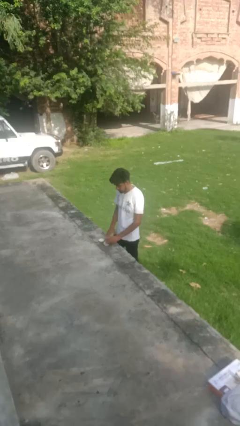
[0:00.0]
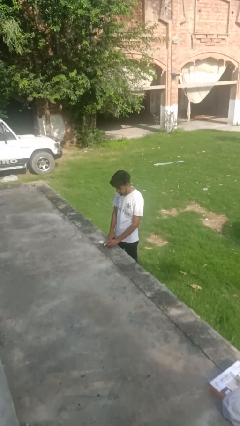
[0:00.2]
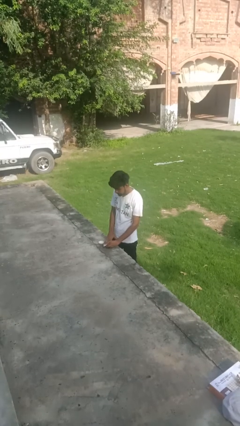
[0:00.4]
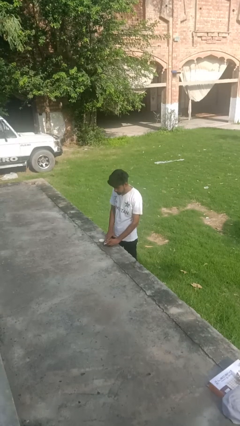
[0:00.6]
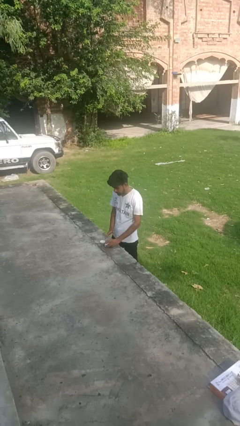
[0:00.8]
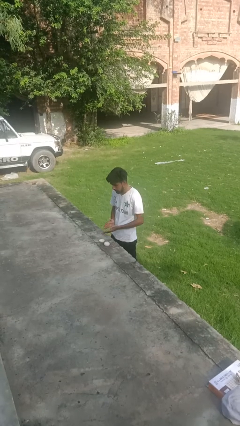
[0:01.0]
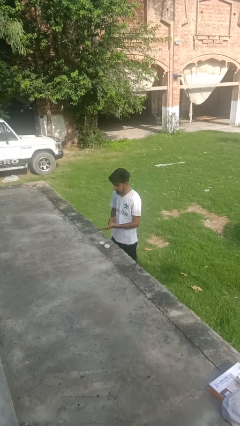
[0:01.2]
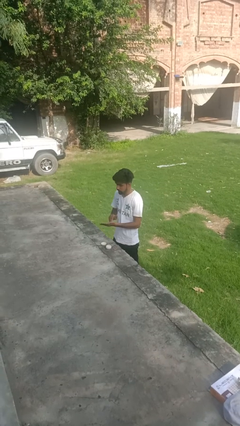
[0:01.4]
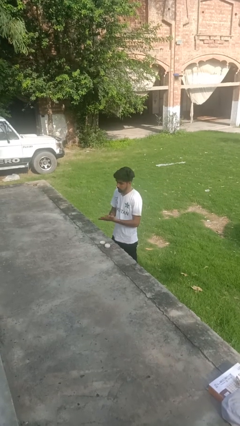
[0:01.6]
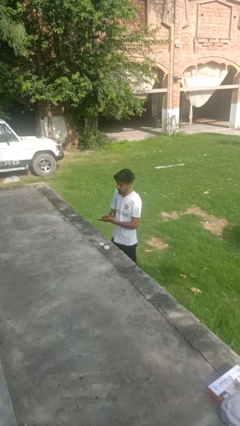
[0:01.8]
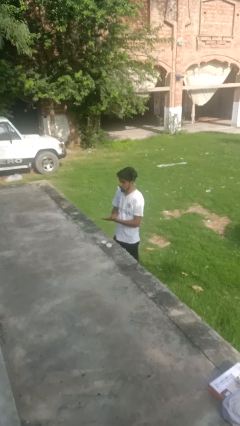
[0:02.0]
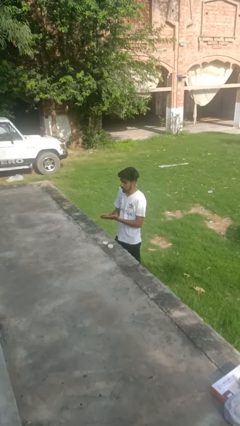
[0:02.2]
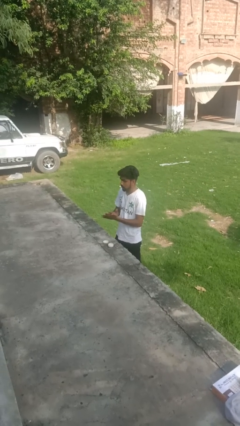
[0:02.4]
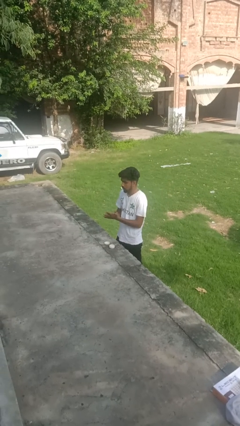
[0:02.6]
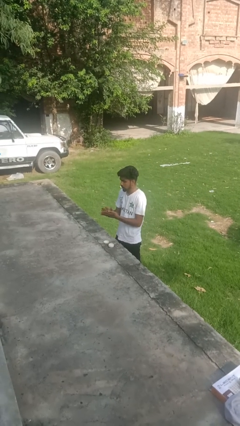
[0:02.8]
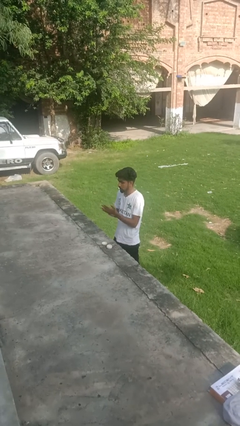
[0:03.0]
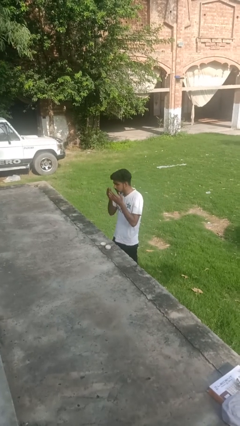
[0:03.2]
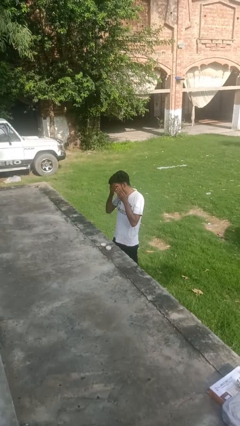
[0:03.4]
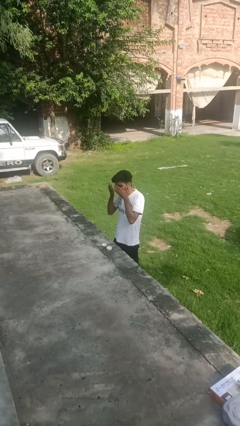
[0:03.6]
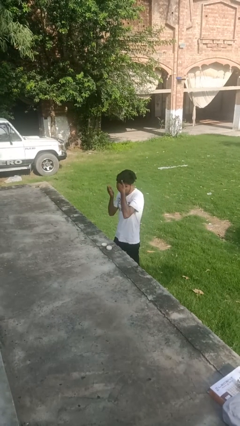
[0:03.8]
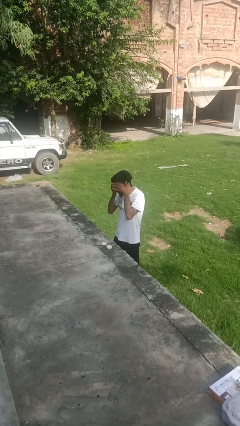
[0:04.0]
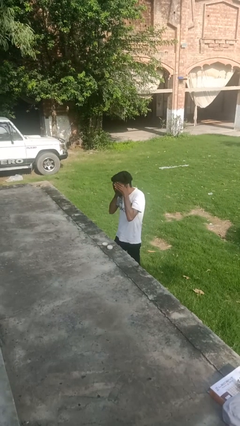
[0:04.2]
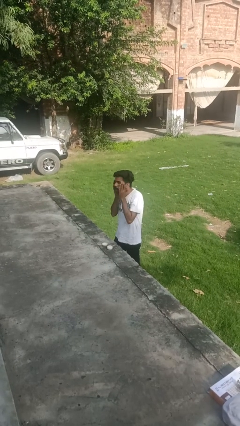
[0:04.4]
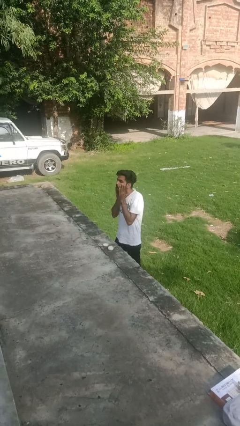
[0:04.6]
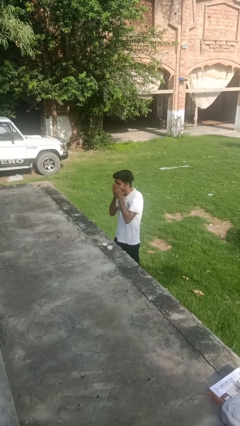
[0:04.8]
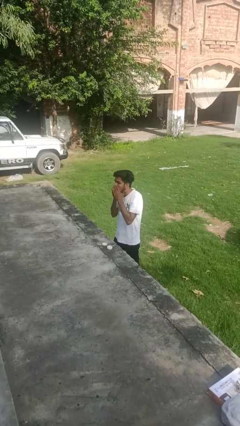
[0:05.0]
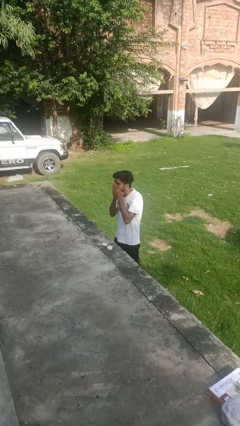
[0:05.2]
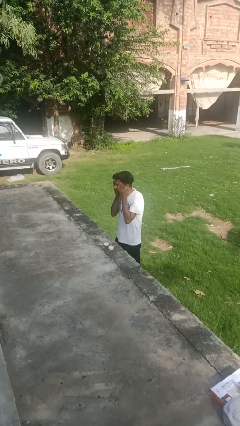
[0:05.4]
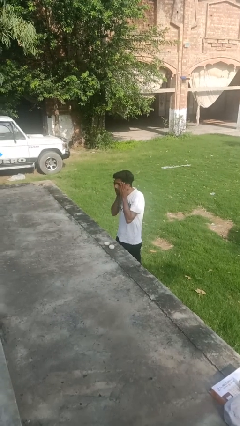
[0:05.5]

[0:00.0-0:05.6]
person applies facial moisturizer

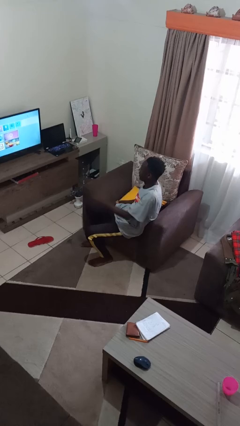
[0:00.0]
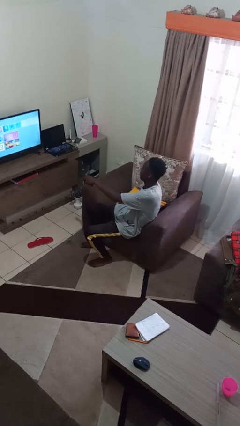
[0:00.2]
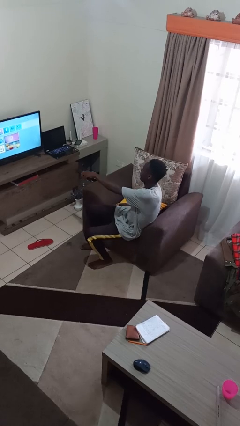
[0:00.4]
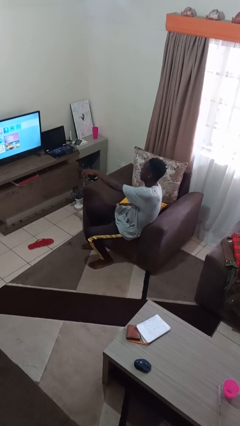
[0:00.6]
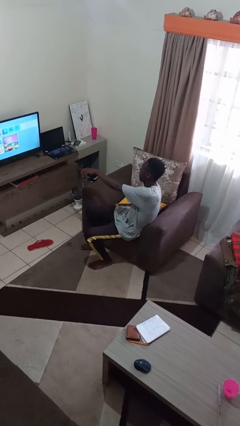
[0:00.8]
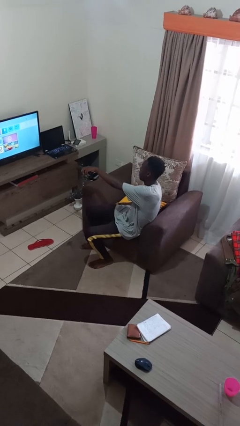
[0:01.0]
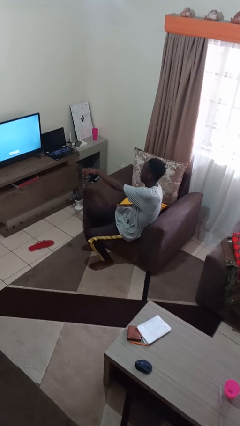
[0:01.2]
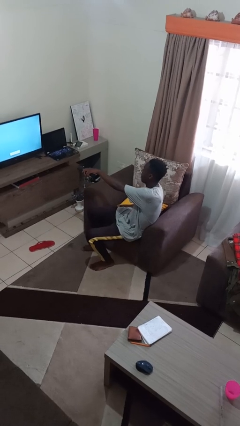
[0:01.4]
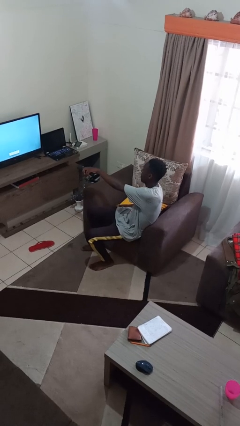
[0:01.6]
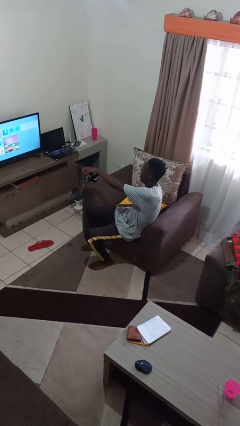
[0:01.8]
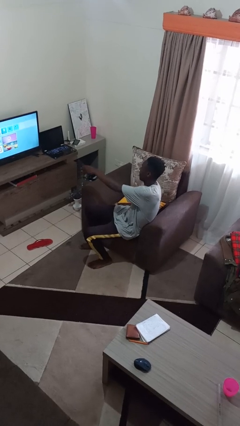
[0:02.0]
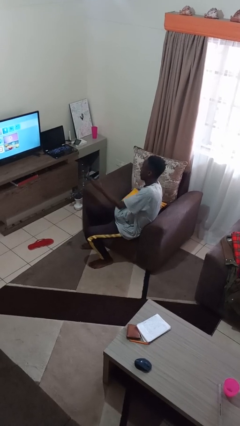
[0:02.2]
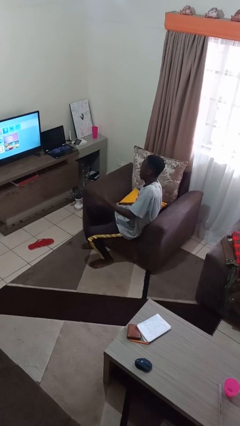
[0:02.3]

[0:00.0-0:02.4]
person uses television remote

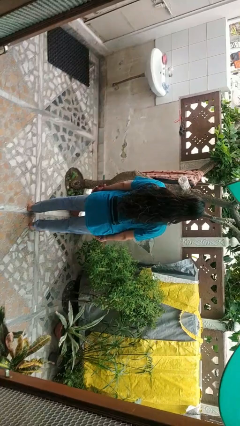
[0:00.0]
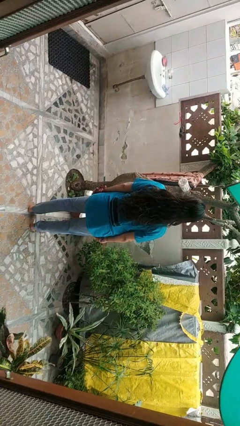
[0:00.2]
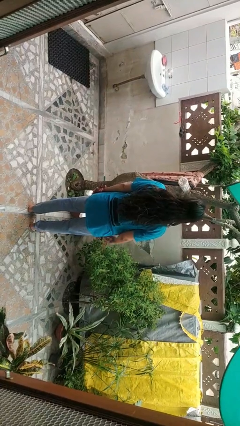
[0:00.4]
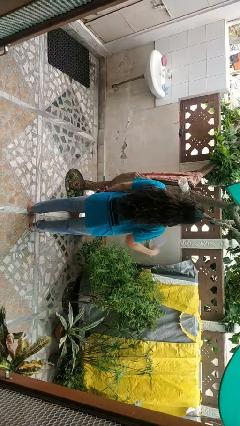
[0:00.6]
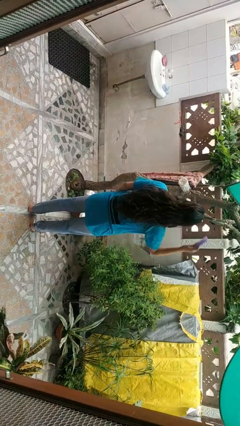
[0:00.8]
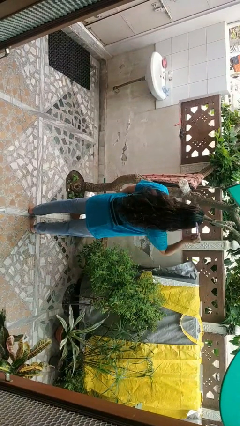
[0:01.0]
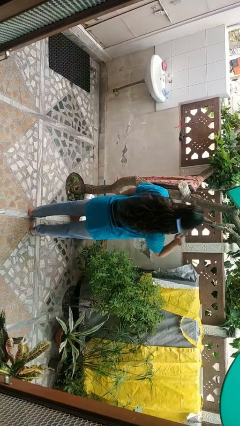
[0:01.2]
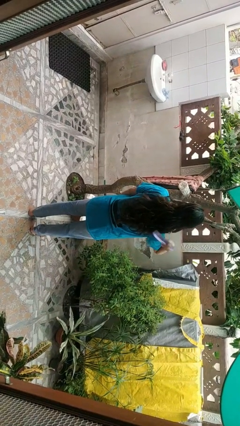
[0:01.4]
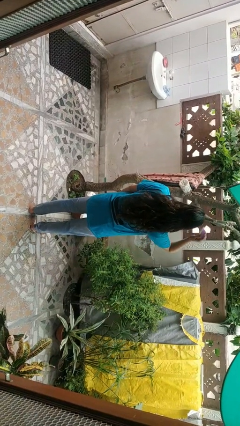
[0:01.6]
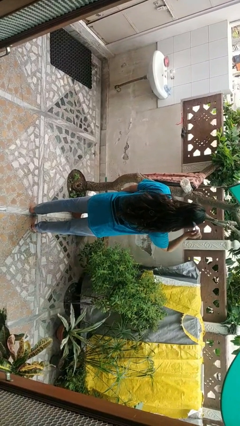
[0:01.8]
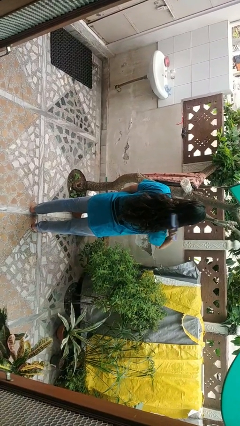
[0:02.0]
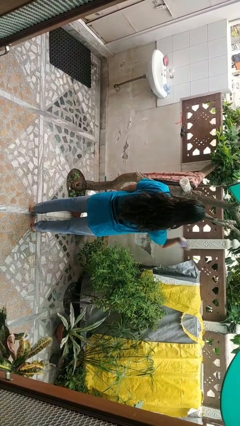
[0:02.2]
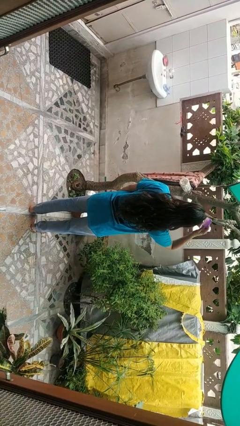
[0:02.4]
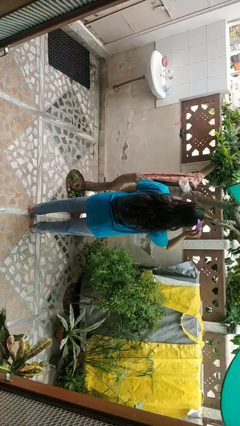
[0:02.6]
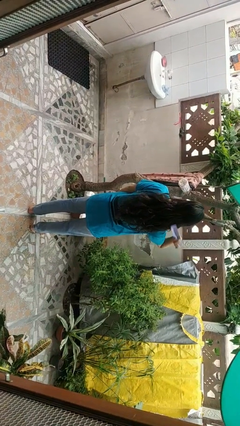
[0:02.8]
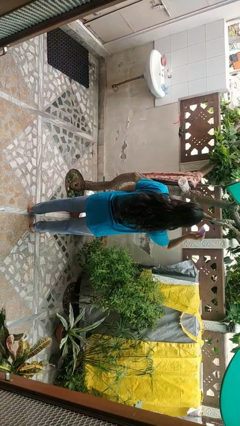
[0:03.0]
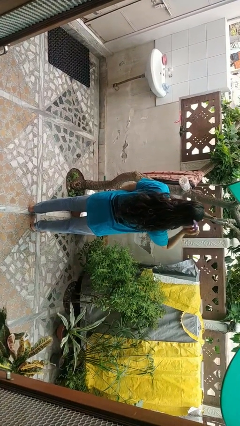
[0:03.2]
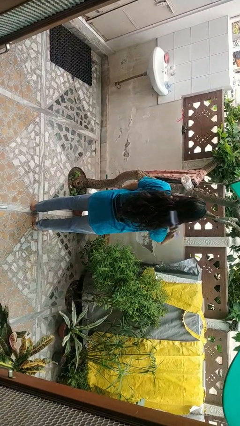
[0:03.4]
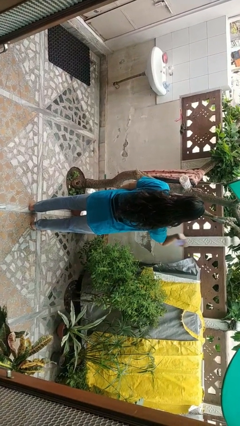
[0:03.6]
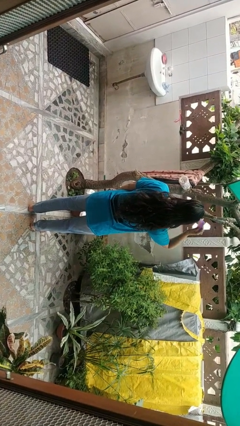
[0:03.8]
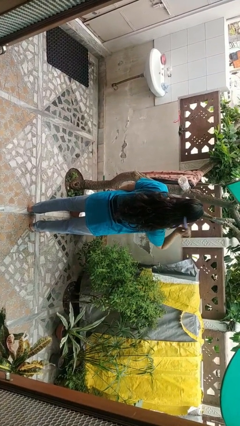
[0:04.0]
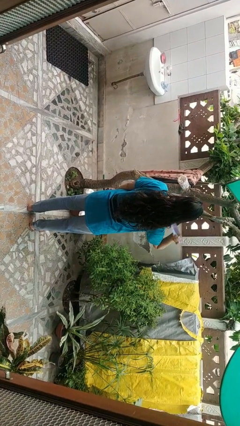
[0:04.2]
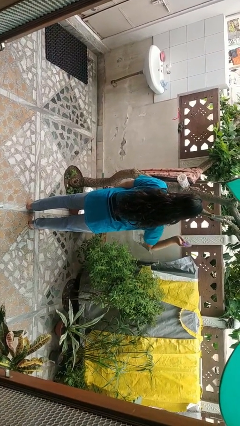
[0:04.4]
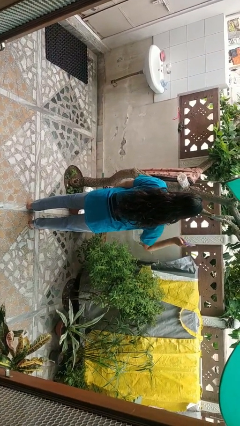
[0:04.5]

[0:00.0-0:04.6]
person brushes hair

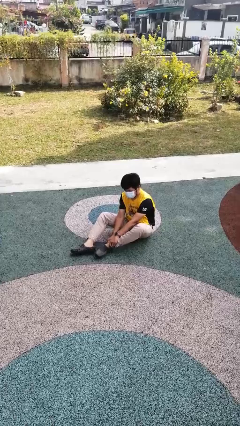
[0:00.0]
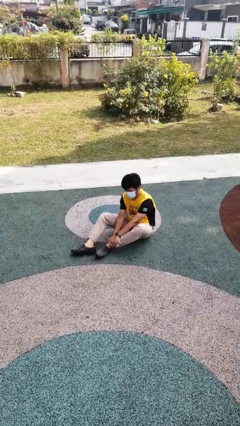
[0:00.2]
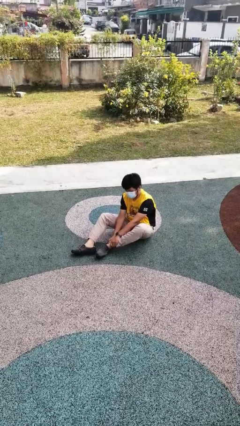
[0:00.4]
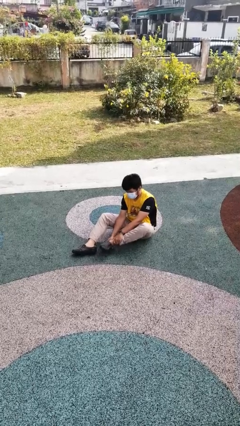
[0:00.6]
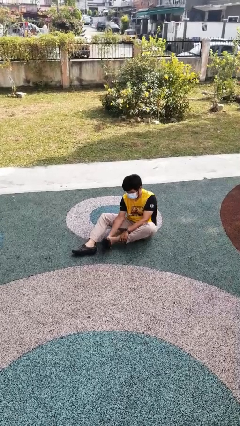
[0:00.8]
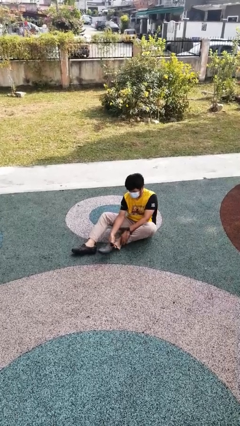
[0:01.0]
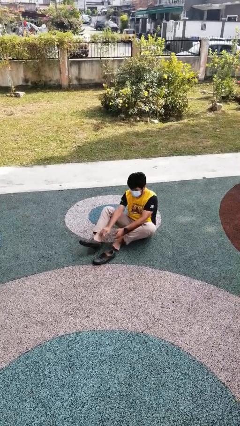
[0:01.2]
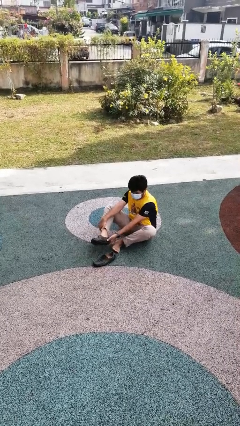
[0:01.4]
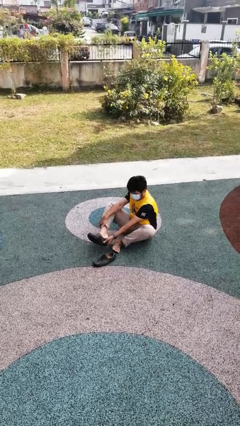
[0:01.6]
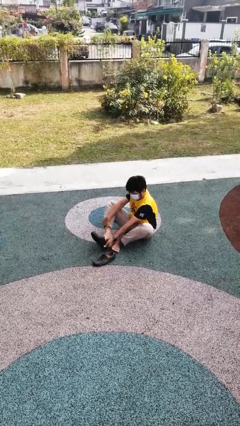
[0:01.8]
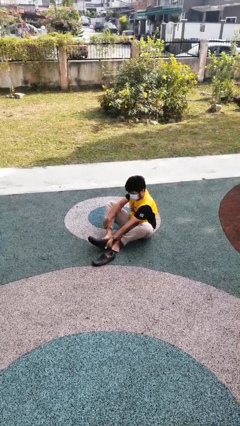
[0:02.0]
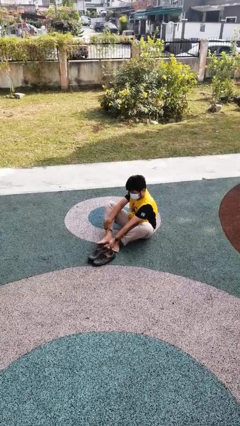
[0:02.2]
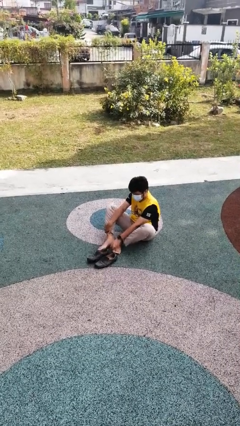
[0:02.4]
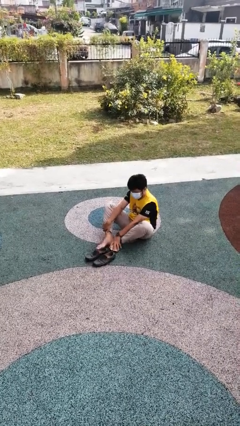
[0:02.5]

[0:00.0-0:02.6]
person takes off shoes

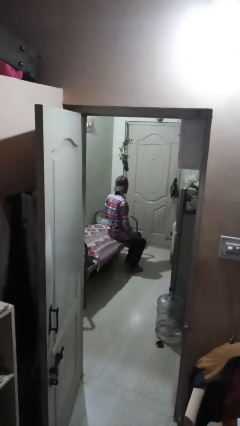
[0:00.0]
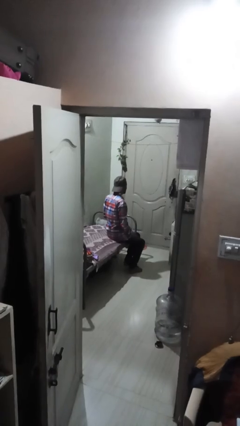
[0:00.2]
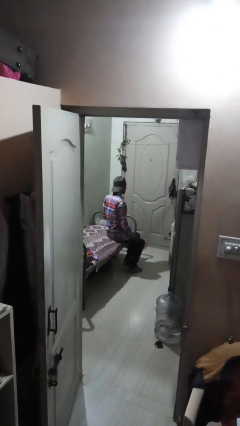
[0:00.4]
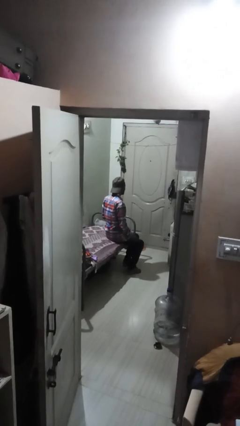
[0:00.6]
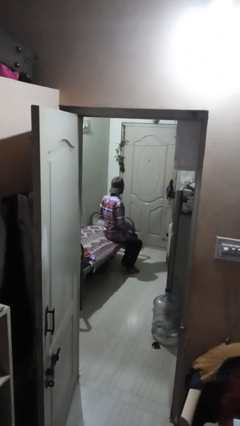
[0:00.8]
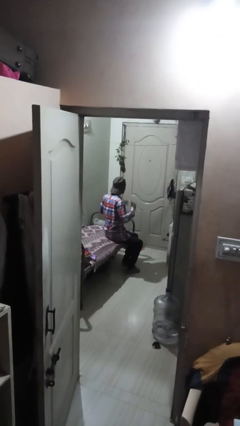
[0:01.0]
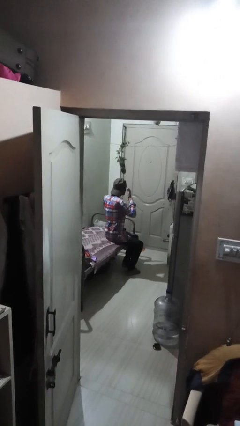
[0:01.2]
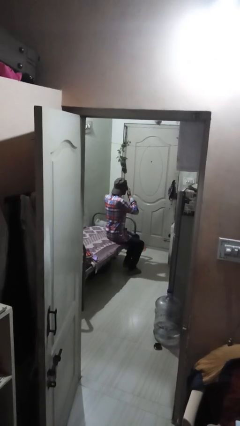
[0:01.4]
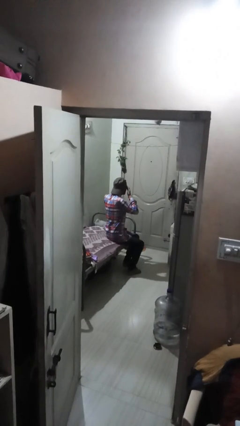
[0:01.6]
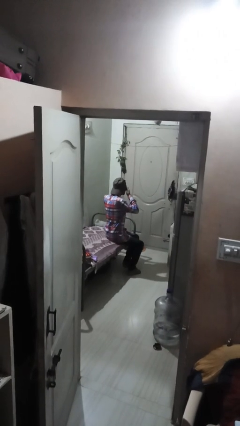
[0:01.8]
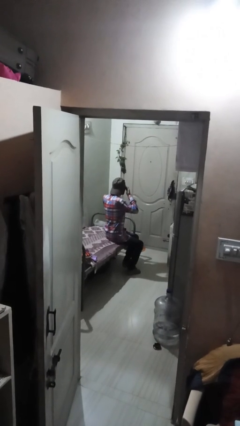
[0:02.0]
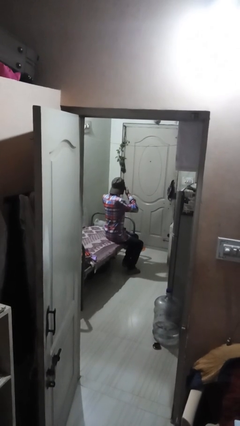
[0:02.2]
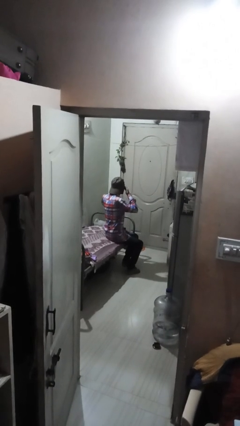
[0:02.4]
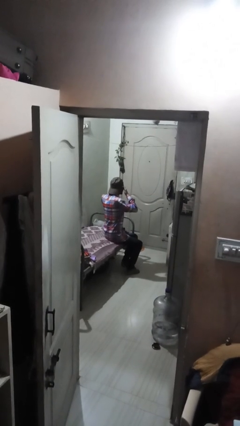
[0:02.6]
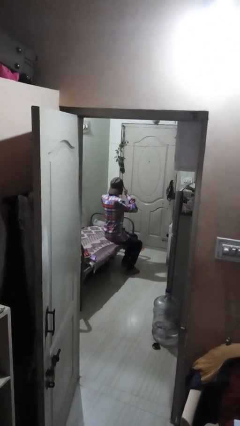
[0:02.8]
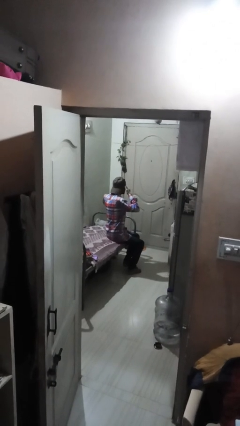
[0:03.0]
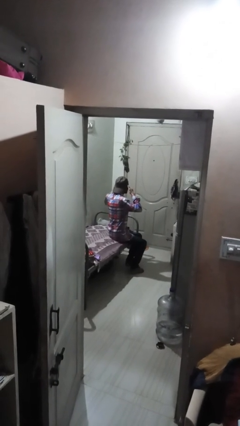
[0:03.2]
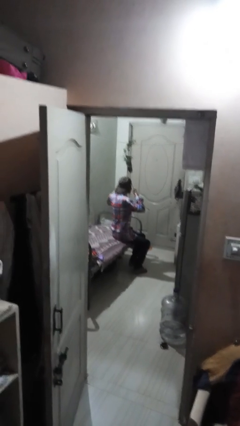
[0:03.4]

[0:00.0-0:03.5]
person rubs eyes
